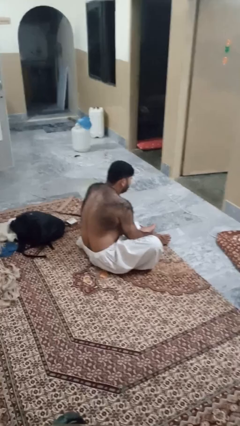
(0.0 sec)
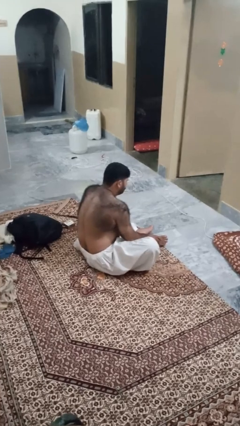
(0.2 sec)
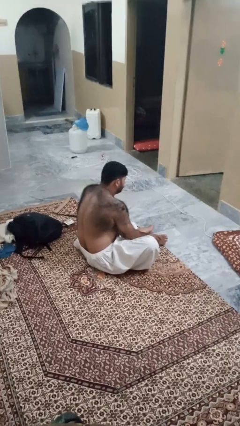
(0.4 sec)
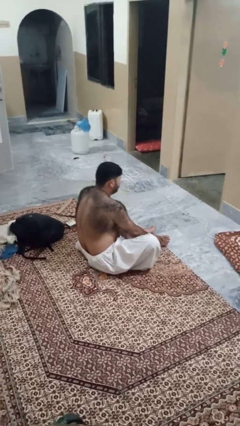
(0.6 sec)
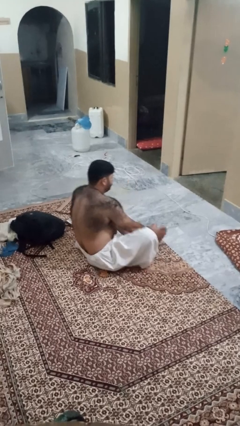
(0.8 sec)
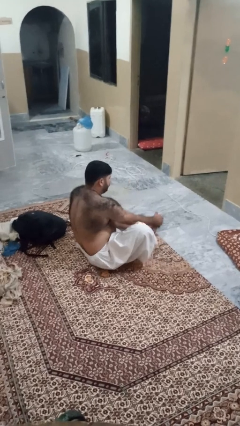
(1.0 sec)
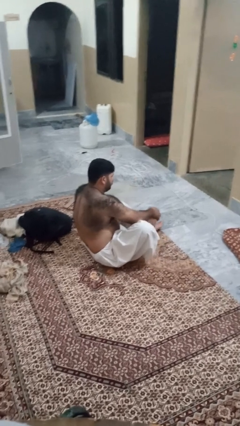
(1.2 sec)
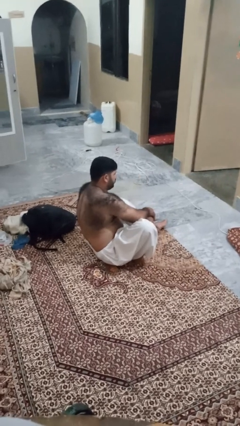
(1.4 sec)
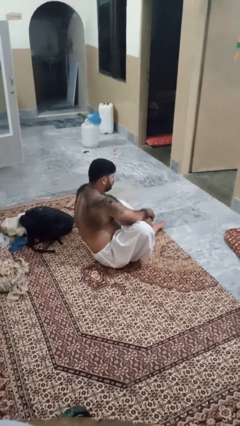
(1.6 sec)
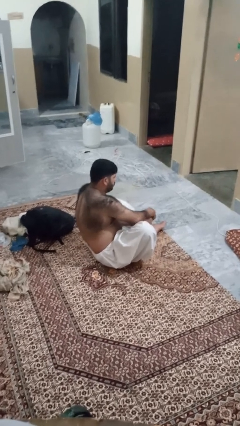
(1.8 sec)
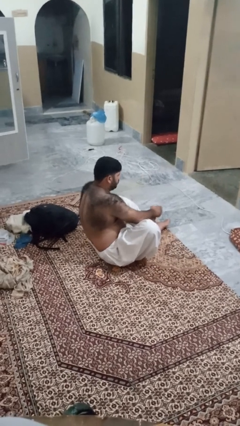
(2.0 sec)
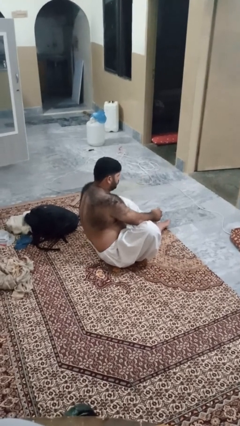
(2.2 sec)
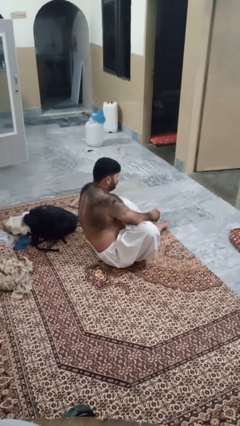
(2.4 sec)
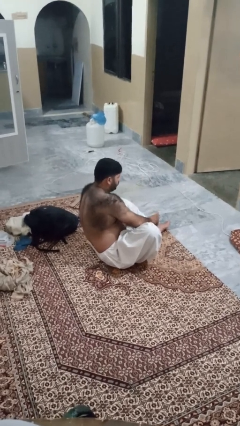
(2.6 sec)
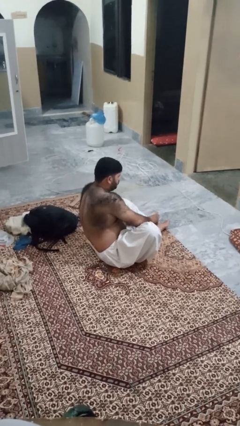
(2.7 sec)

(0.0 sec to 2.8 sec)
person rubs foot

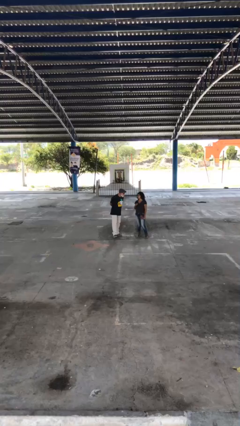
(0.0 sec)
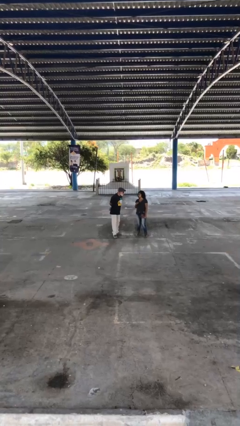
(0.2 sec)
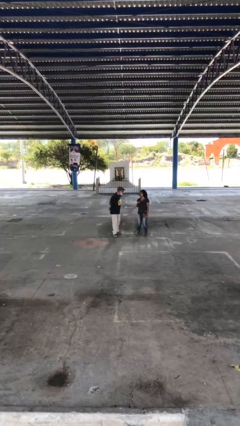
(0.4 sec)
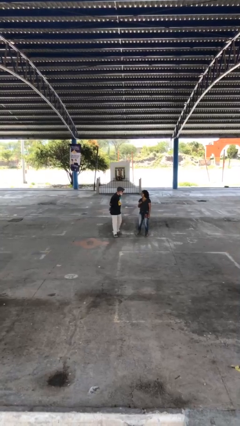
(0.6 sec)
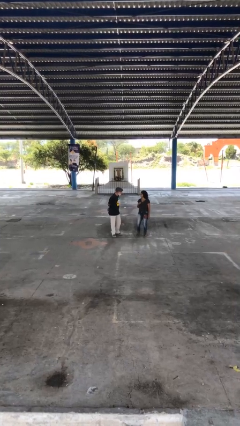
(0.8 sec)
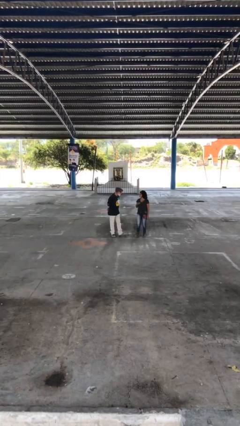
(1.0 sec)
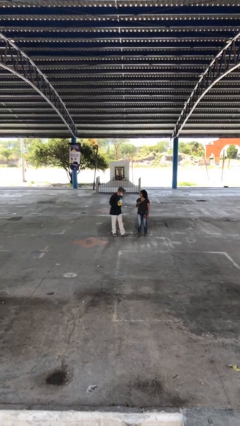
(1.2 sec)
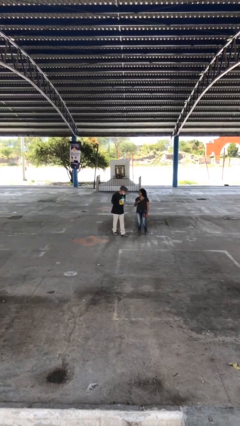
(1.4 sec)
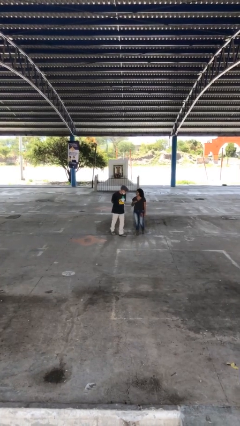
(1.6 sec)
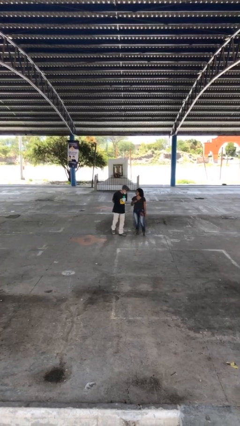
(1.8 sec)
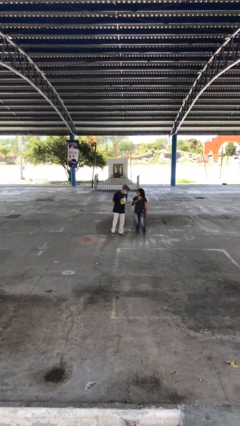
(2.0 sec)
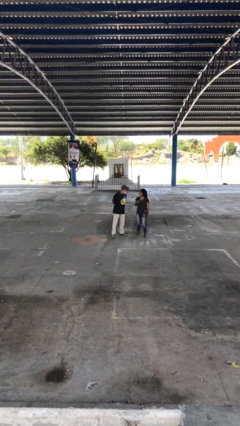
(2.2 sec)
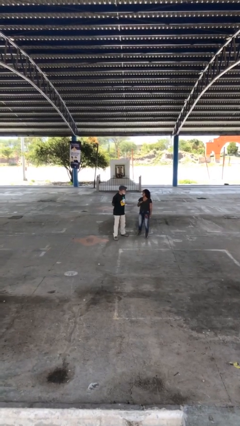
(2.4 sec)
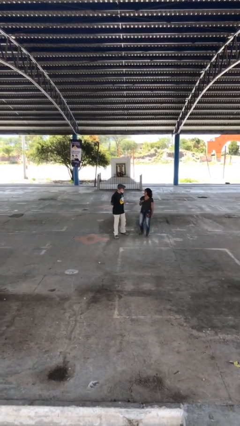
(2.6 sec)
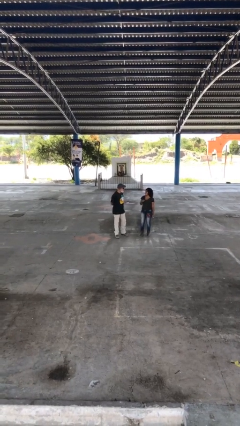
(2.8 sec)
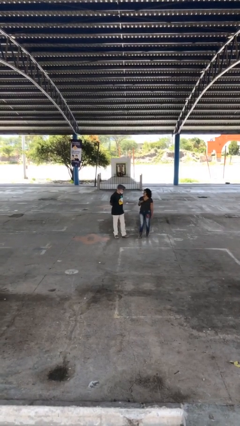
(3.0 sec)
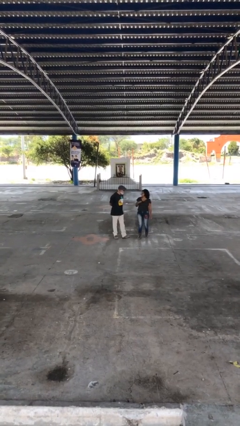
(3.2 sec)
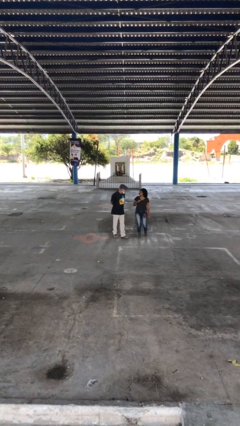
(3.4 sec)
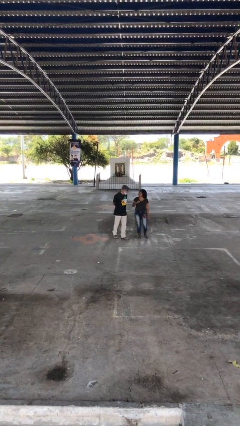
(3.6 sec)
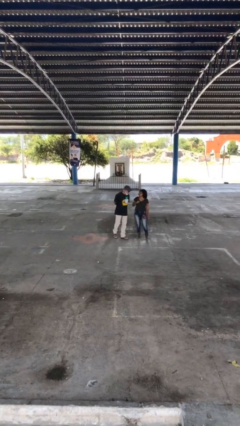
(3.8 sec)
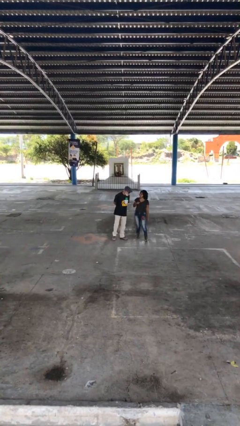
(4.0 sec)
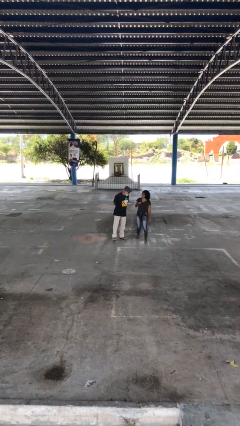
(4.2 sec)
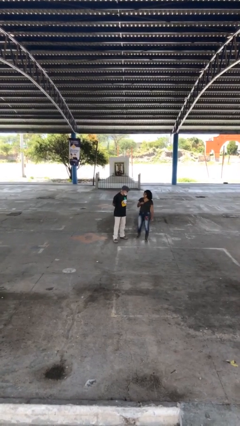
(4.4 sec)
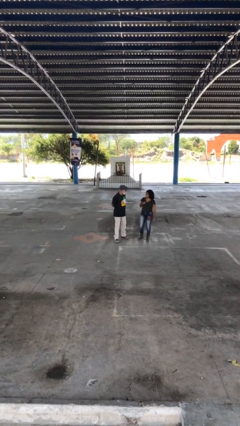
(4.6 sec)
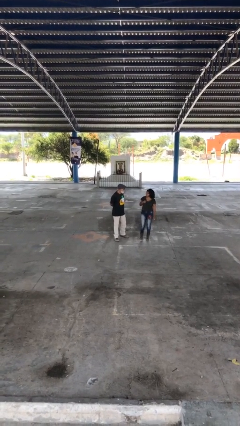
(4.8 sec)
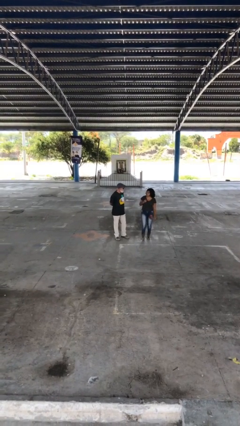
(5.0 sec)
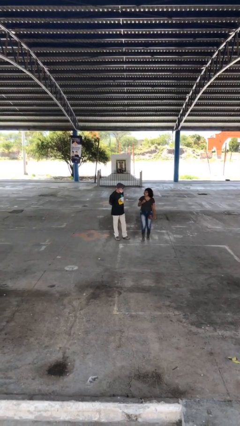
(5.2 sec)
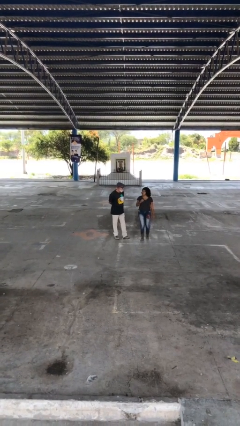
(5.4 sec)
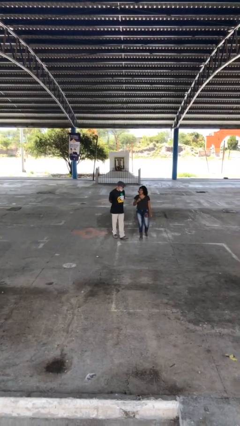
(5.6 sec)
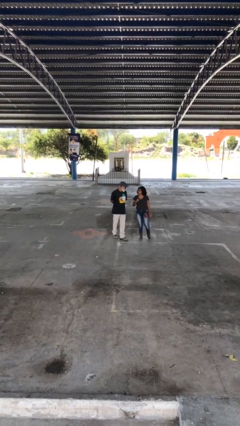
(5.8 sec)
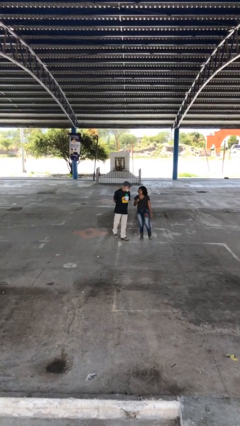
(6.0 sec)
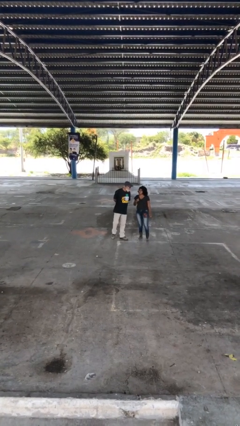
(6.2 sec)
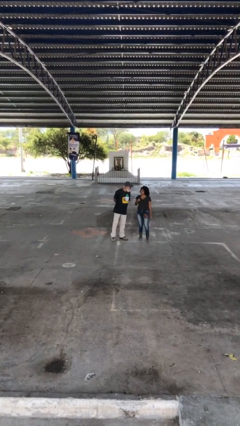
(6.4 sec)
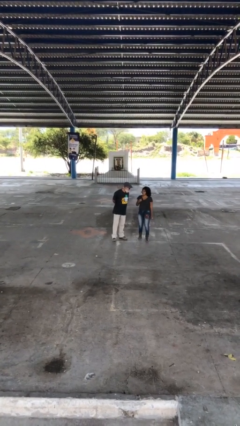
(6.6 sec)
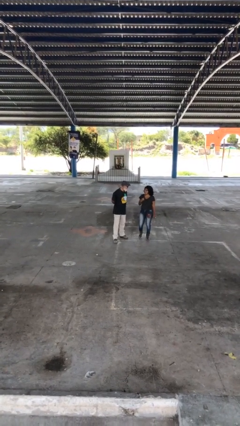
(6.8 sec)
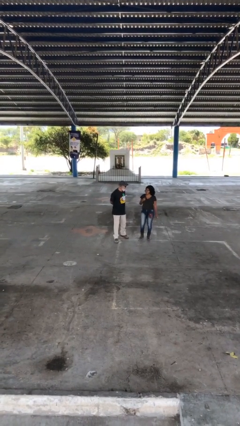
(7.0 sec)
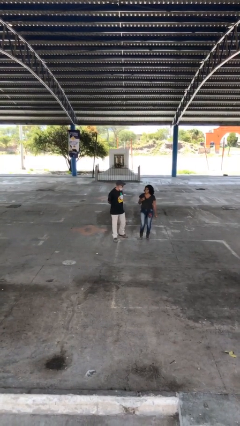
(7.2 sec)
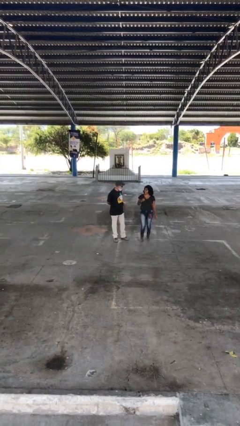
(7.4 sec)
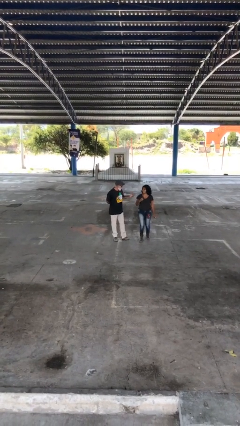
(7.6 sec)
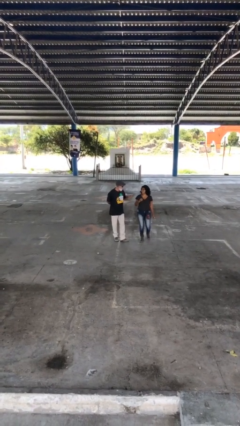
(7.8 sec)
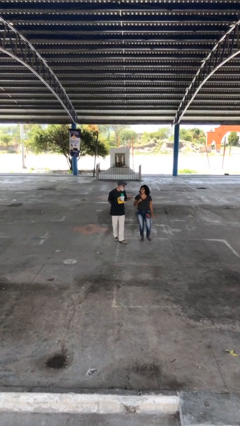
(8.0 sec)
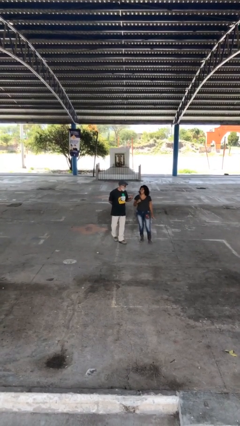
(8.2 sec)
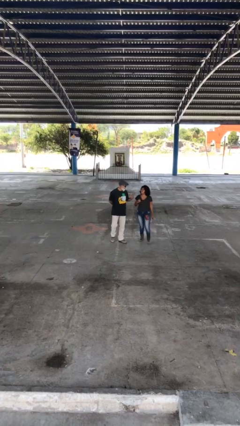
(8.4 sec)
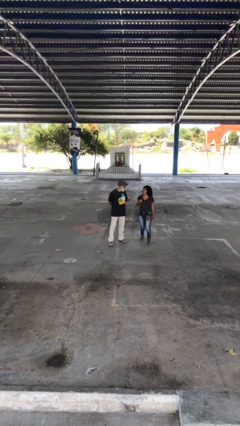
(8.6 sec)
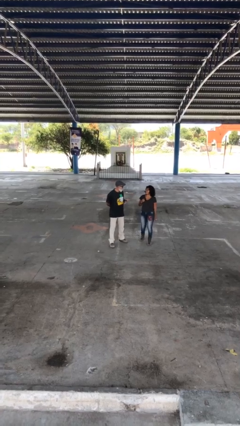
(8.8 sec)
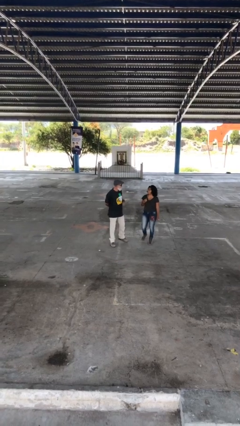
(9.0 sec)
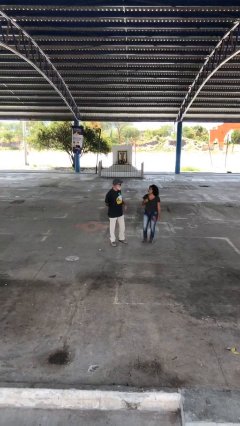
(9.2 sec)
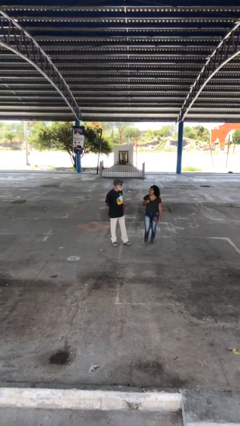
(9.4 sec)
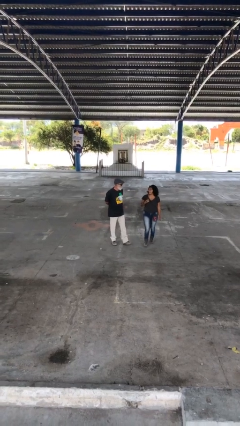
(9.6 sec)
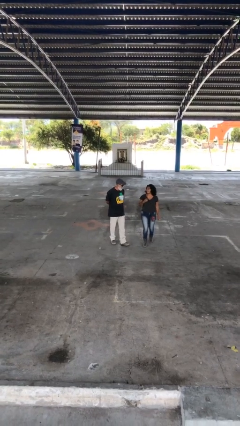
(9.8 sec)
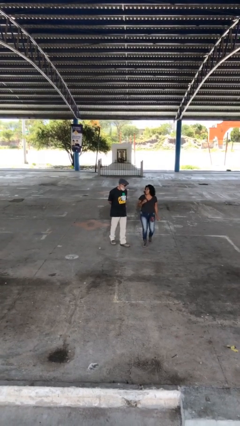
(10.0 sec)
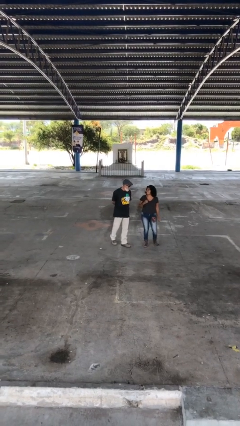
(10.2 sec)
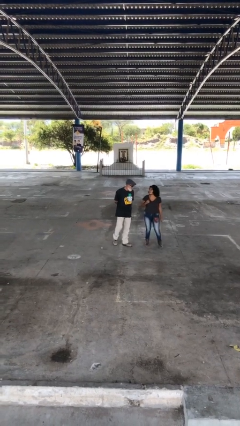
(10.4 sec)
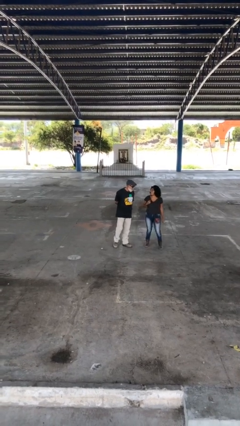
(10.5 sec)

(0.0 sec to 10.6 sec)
person talks to person

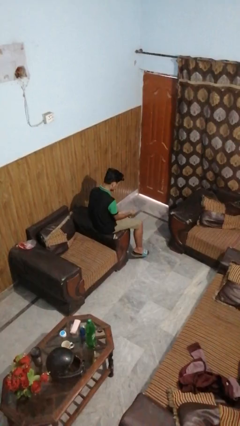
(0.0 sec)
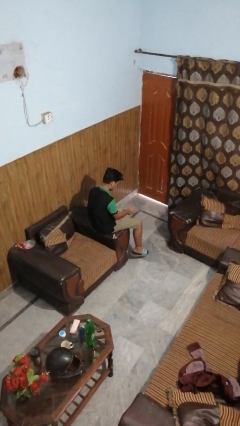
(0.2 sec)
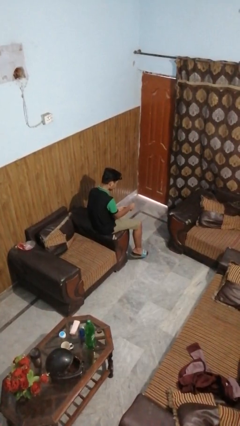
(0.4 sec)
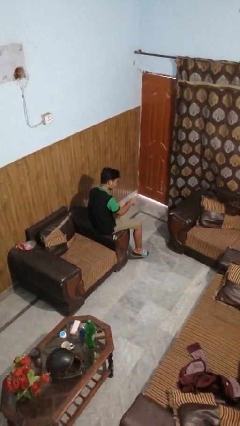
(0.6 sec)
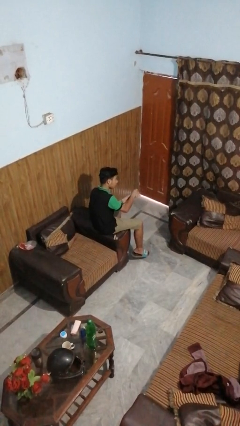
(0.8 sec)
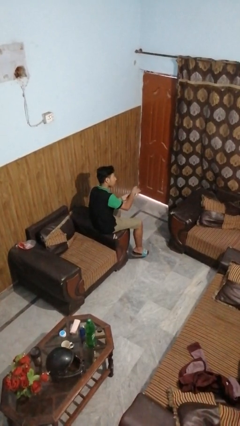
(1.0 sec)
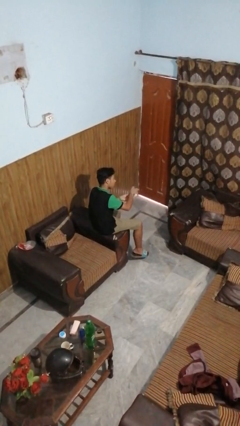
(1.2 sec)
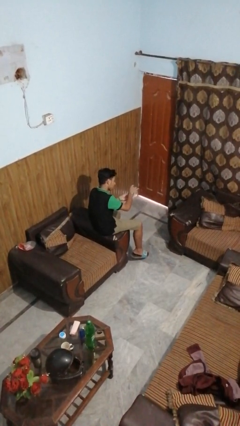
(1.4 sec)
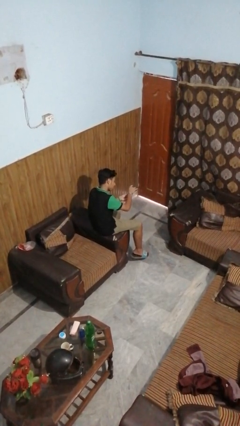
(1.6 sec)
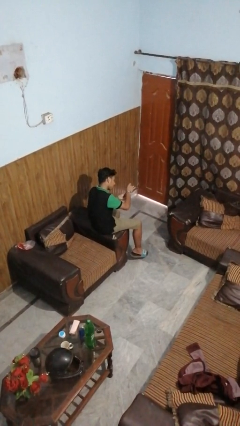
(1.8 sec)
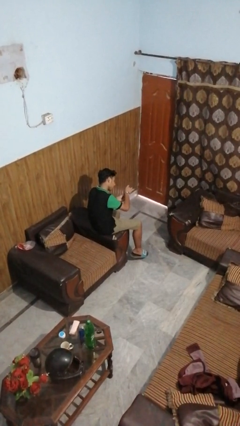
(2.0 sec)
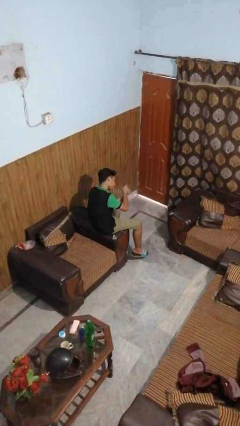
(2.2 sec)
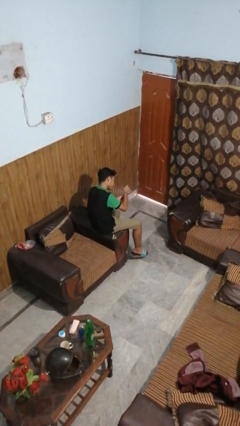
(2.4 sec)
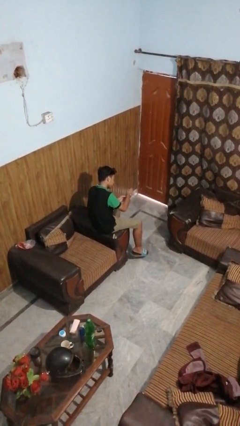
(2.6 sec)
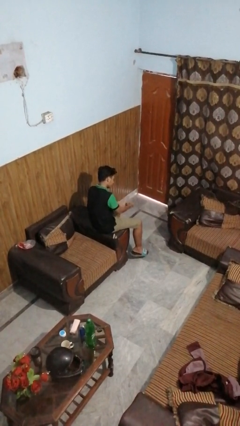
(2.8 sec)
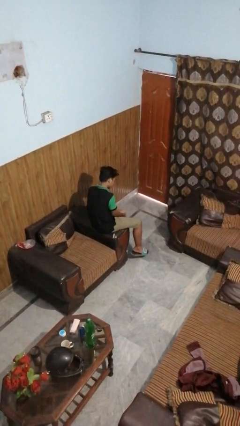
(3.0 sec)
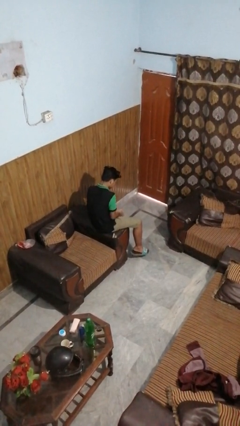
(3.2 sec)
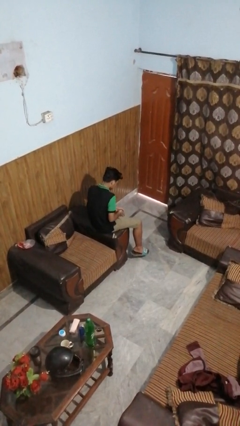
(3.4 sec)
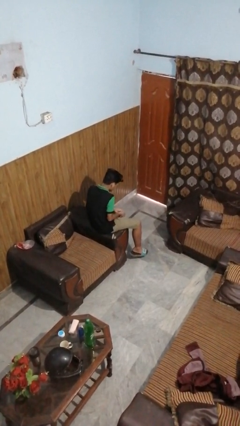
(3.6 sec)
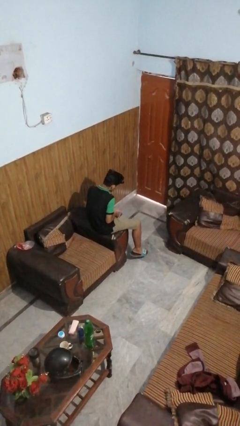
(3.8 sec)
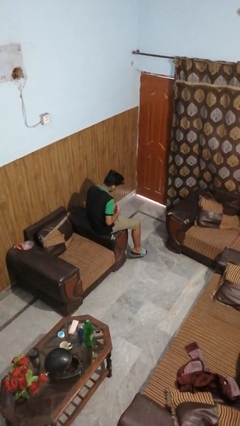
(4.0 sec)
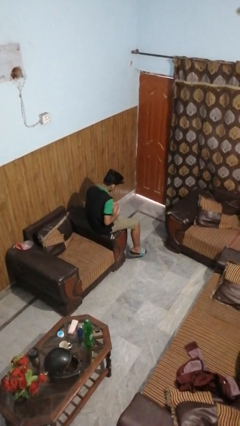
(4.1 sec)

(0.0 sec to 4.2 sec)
person takes off wristwatch
